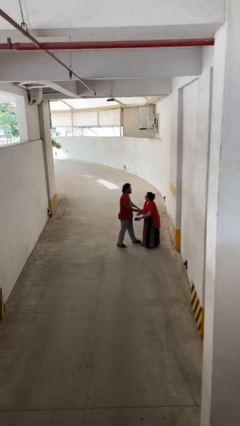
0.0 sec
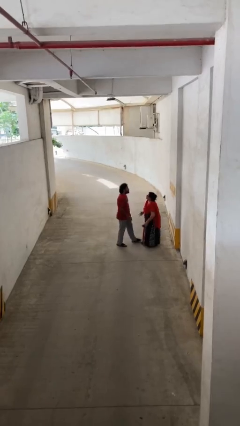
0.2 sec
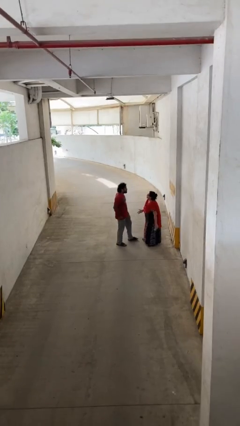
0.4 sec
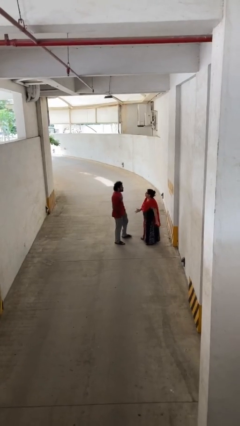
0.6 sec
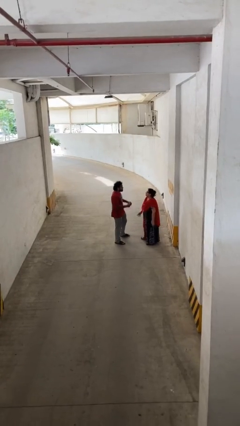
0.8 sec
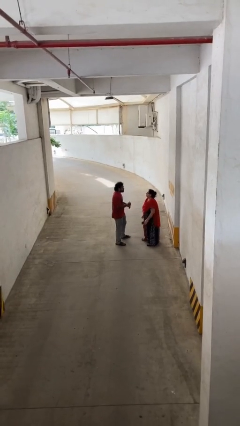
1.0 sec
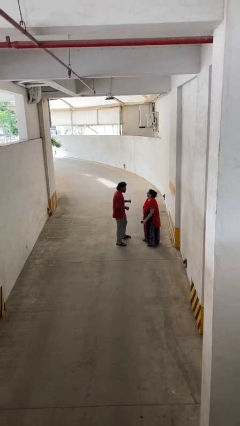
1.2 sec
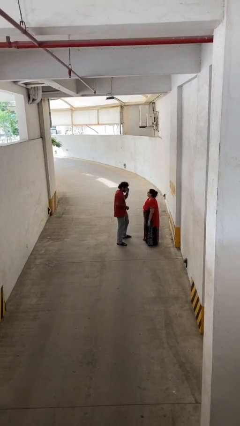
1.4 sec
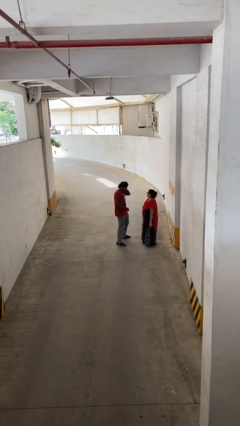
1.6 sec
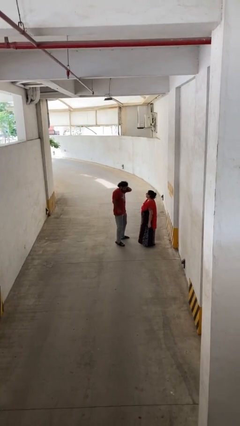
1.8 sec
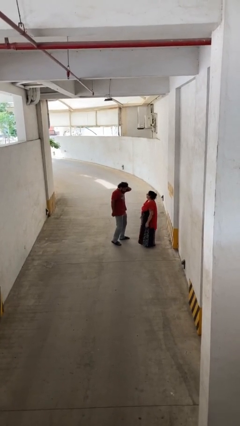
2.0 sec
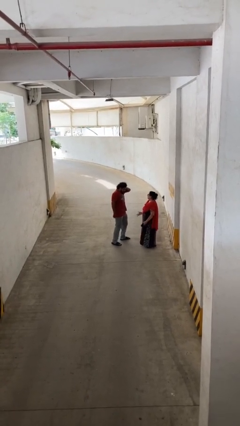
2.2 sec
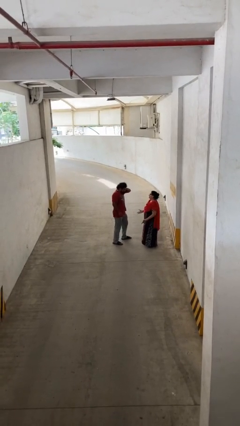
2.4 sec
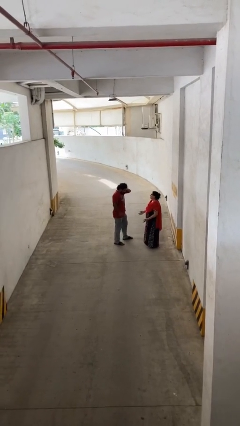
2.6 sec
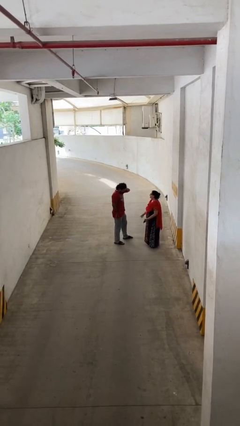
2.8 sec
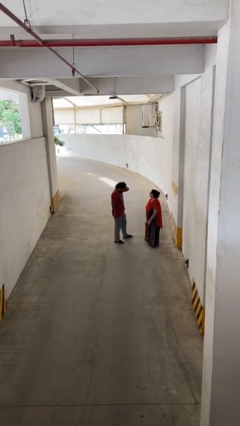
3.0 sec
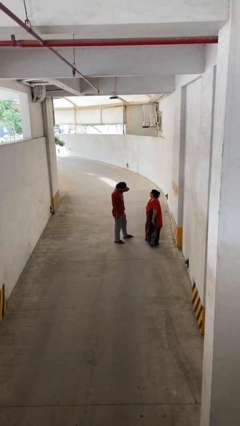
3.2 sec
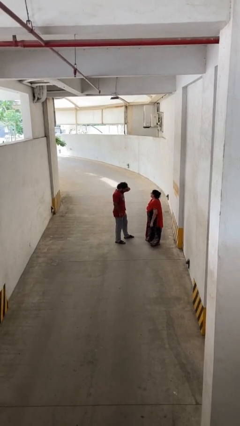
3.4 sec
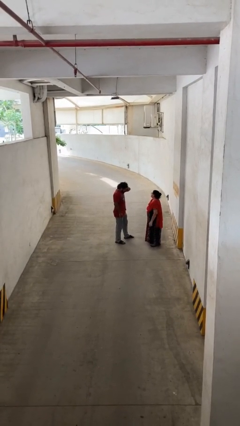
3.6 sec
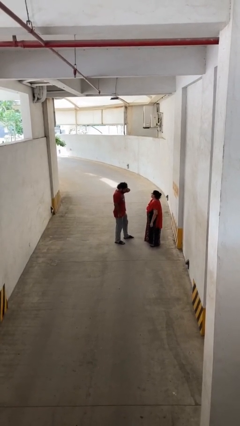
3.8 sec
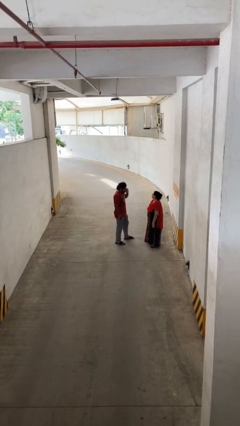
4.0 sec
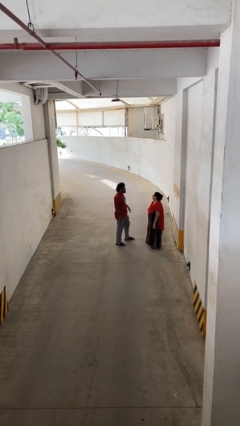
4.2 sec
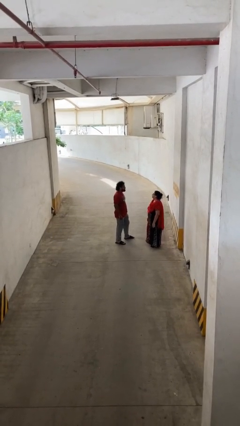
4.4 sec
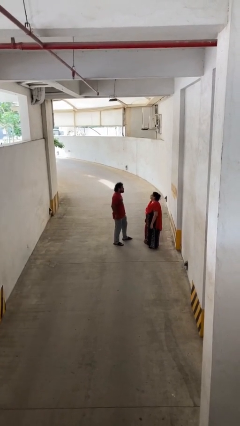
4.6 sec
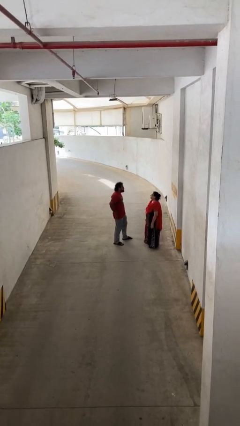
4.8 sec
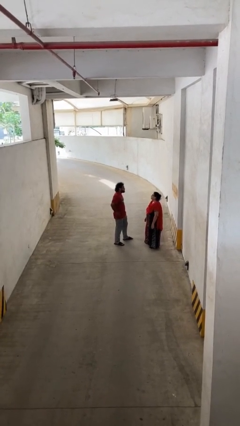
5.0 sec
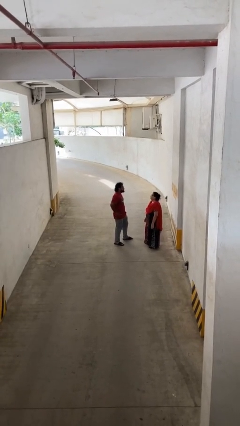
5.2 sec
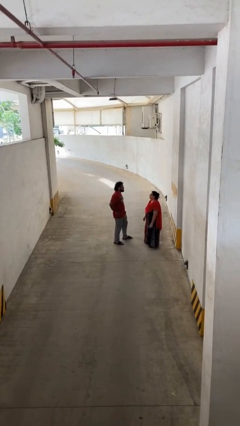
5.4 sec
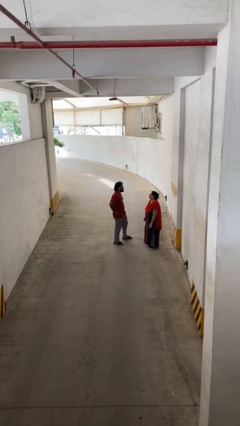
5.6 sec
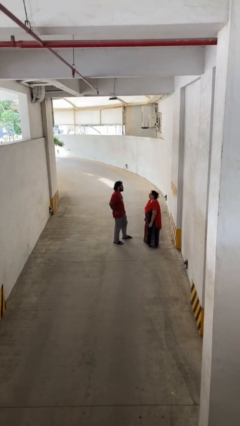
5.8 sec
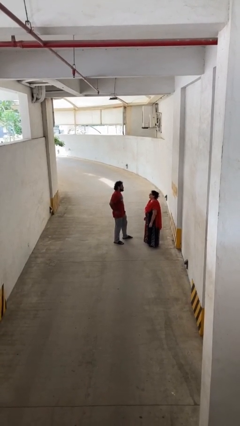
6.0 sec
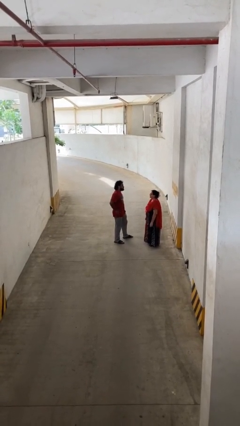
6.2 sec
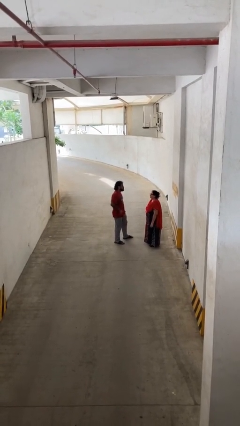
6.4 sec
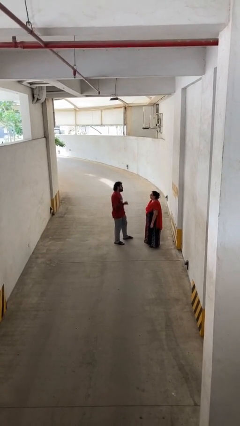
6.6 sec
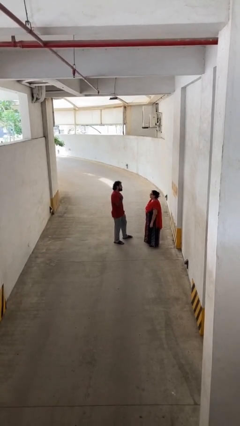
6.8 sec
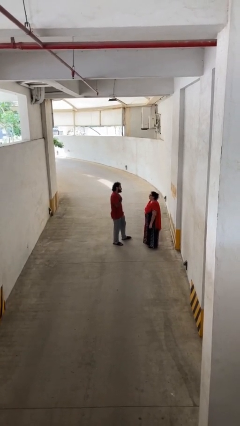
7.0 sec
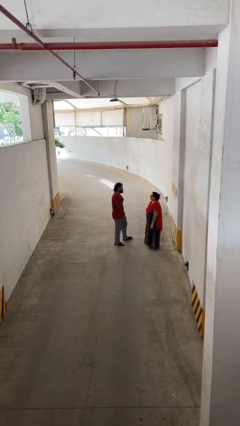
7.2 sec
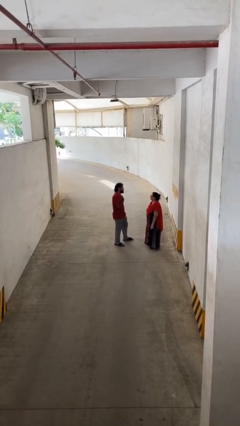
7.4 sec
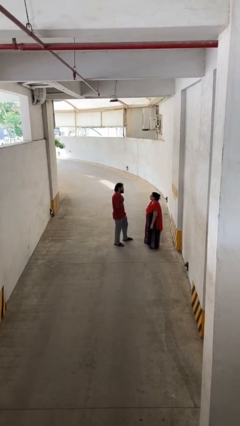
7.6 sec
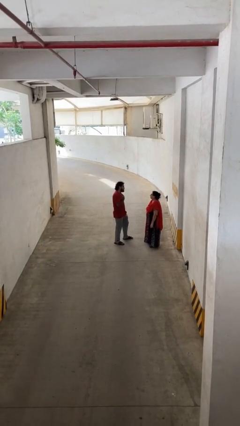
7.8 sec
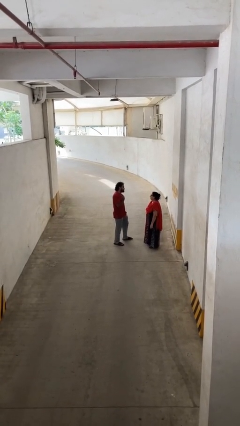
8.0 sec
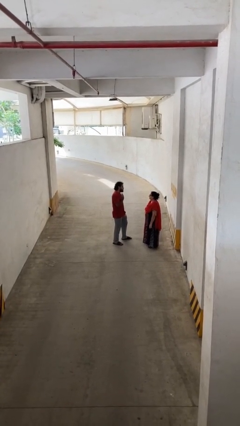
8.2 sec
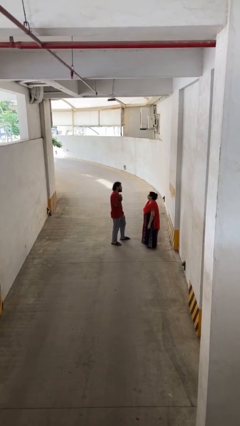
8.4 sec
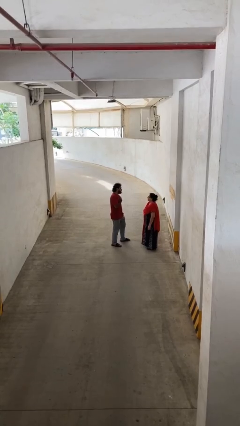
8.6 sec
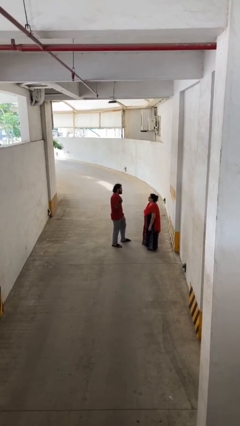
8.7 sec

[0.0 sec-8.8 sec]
person talks to person

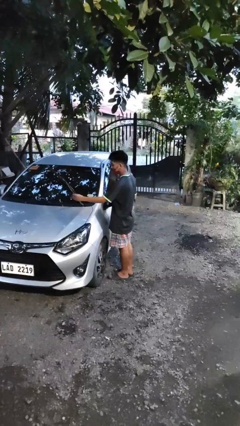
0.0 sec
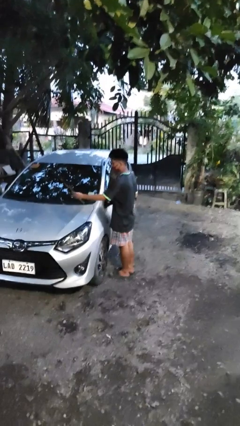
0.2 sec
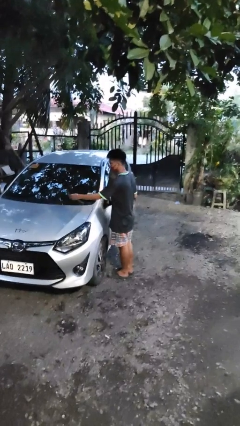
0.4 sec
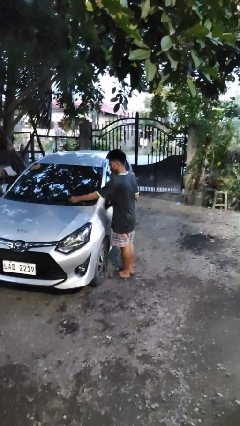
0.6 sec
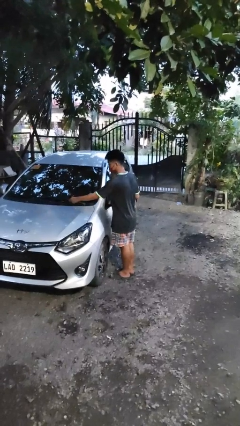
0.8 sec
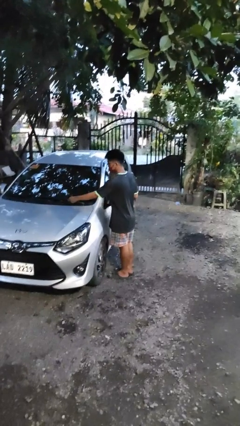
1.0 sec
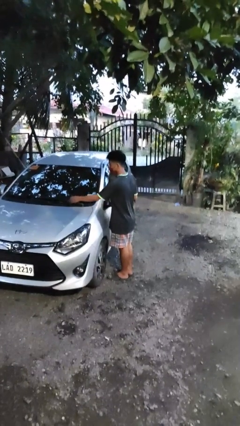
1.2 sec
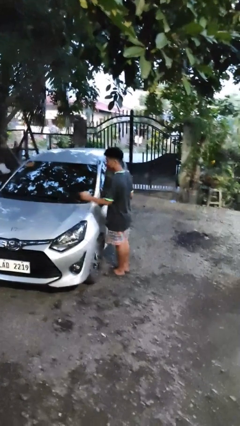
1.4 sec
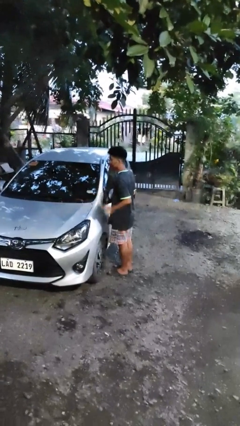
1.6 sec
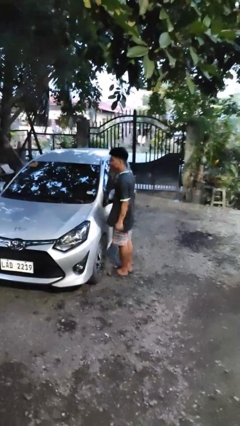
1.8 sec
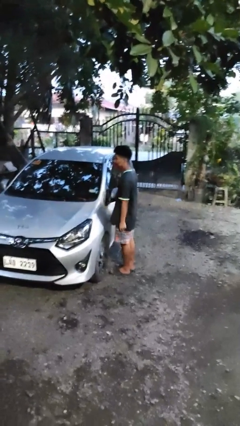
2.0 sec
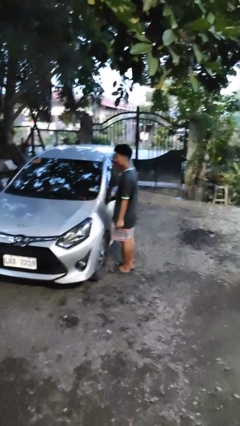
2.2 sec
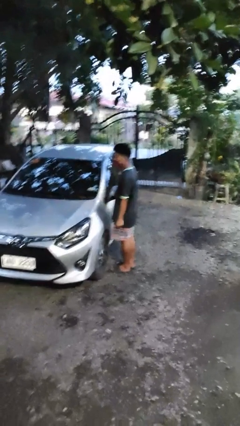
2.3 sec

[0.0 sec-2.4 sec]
person flips down car wipers

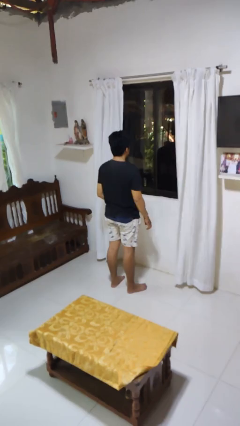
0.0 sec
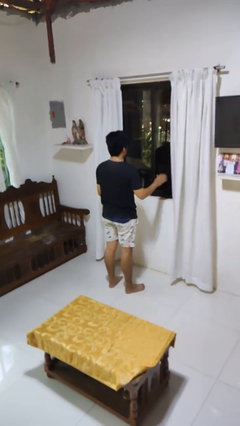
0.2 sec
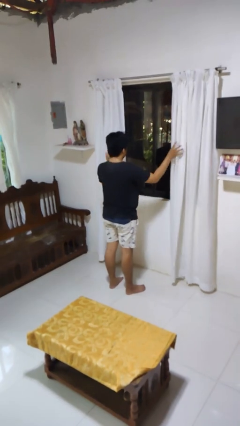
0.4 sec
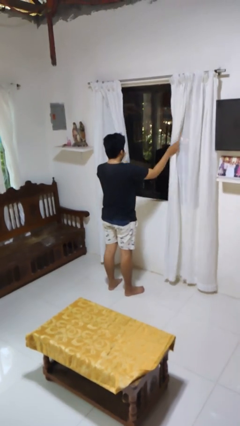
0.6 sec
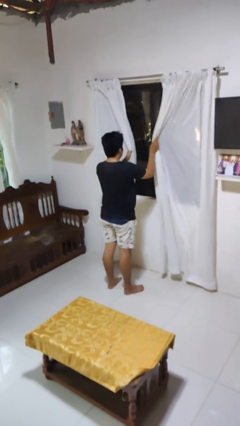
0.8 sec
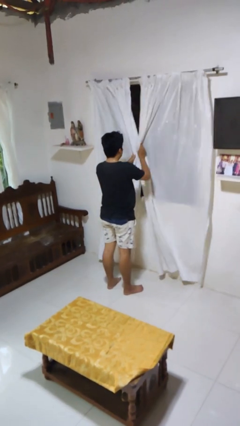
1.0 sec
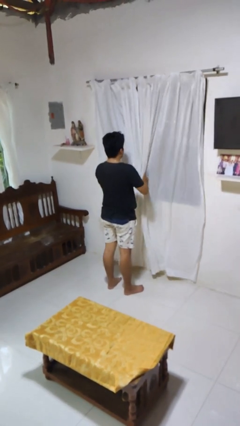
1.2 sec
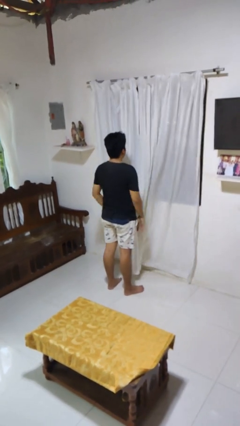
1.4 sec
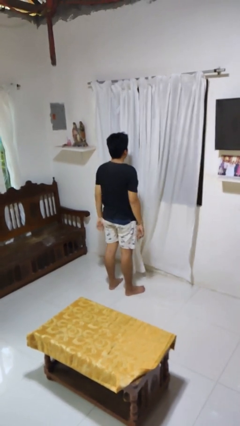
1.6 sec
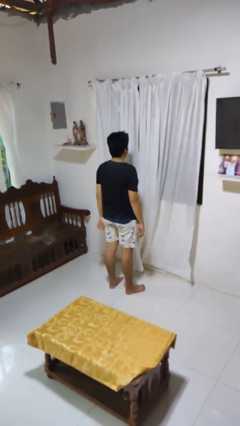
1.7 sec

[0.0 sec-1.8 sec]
person closes curtains

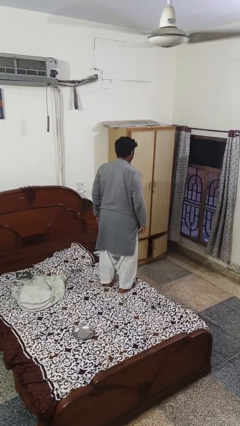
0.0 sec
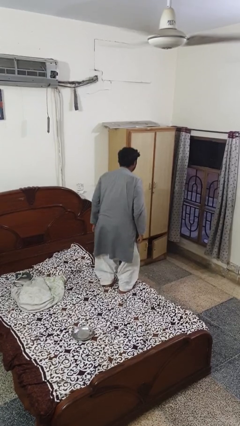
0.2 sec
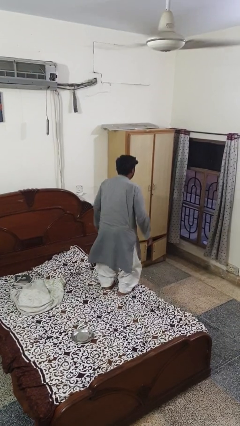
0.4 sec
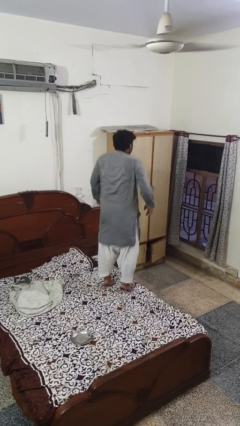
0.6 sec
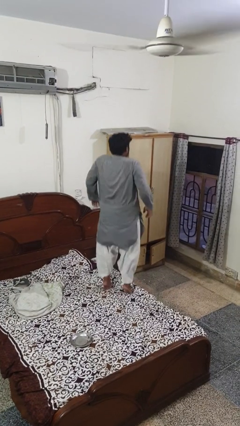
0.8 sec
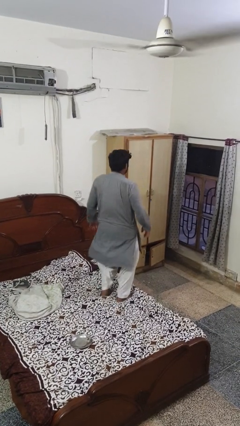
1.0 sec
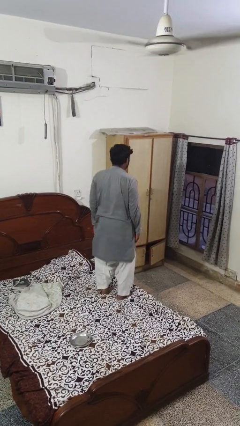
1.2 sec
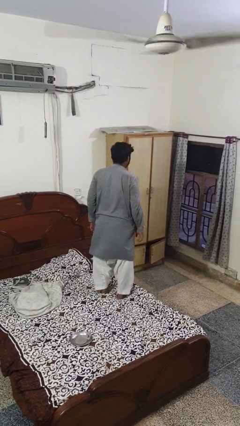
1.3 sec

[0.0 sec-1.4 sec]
person jumps on bed

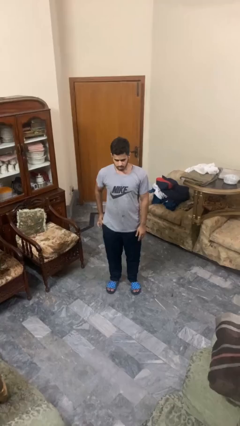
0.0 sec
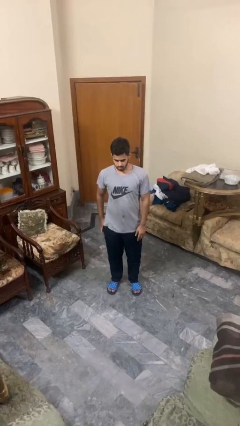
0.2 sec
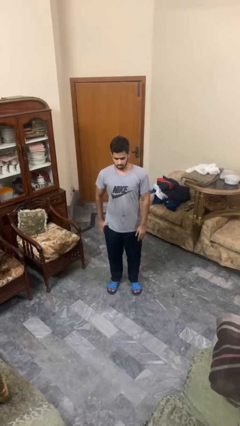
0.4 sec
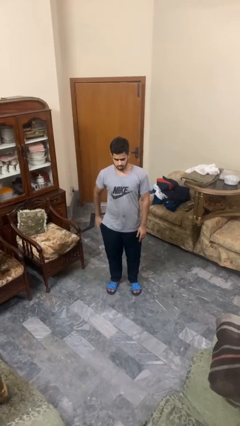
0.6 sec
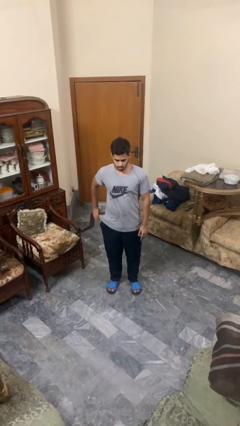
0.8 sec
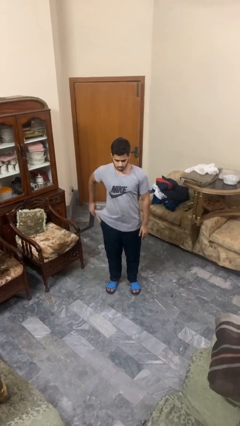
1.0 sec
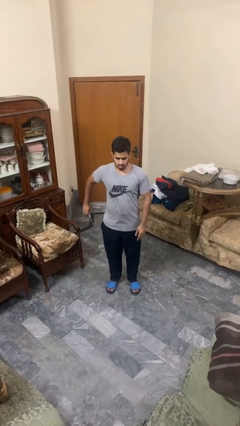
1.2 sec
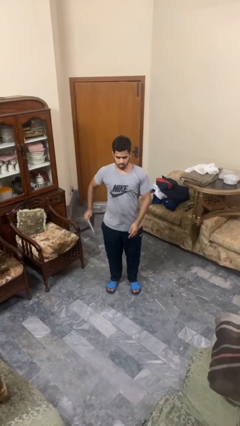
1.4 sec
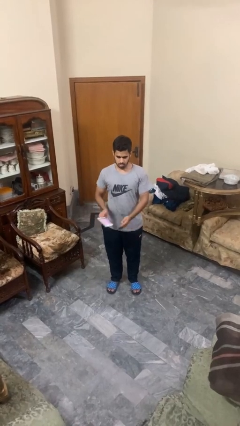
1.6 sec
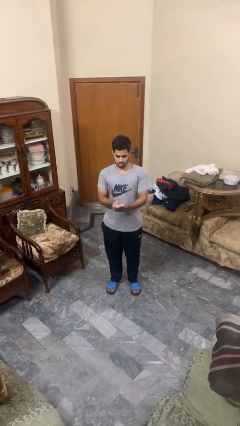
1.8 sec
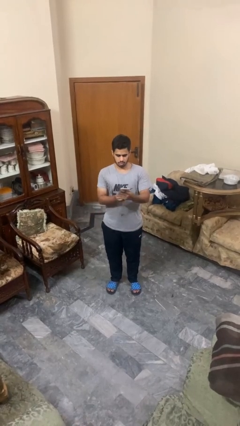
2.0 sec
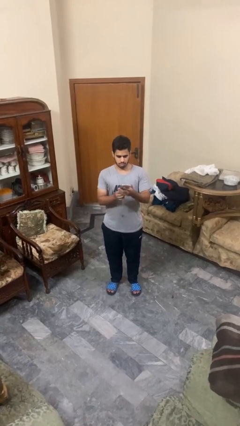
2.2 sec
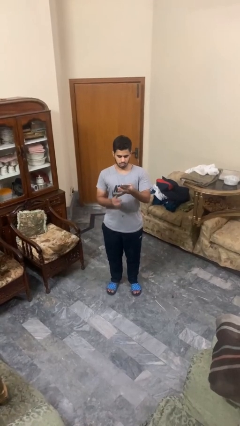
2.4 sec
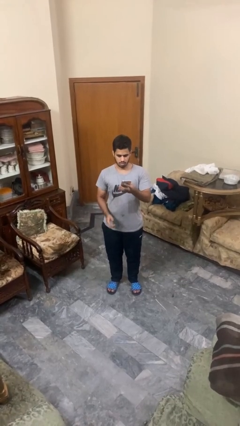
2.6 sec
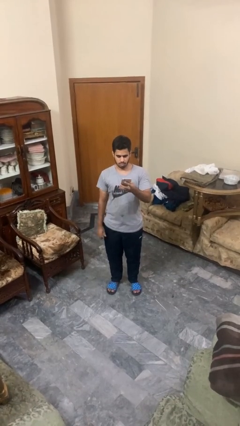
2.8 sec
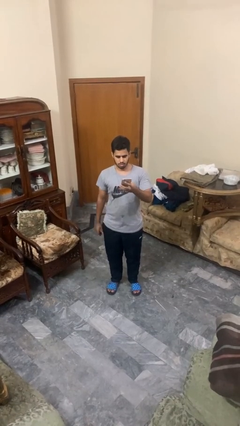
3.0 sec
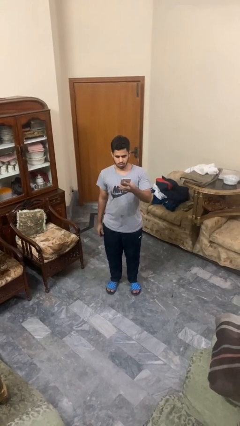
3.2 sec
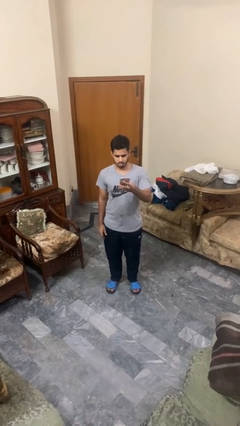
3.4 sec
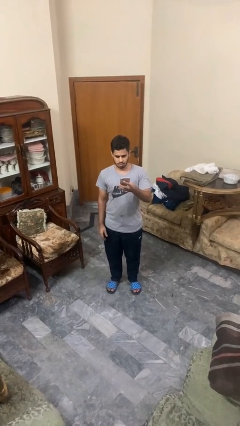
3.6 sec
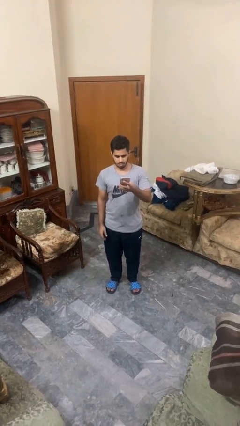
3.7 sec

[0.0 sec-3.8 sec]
person takes phone from pocket
